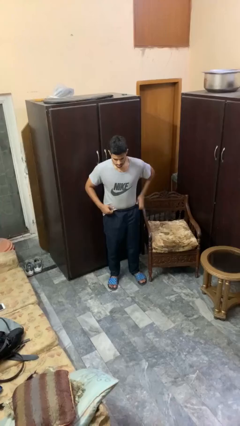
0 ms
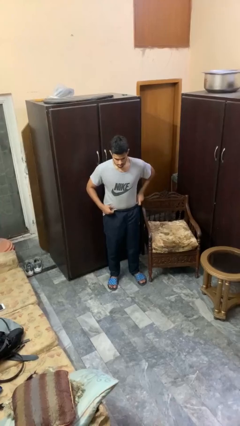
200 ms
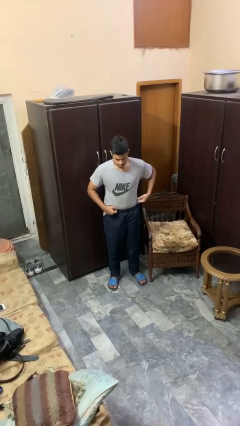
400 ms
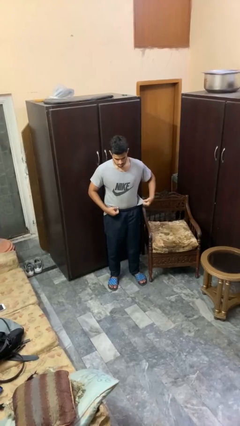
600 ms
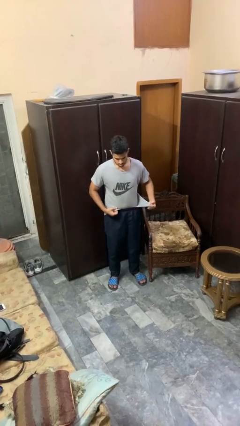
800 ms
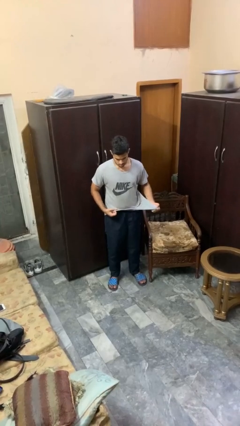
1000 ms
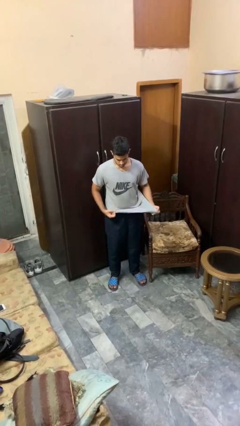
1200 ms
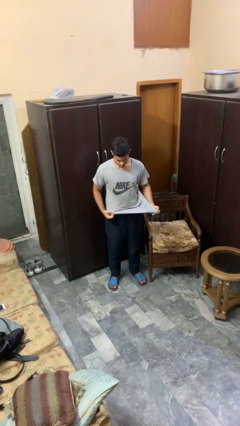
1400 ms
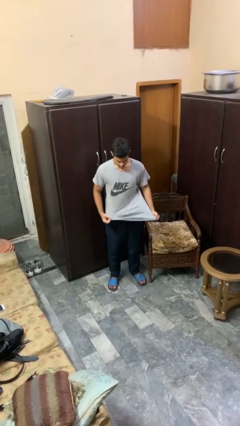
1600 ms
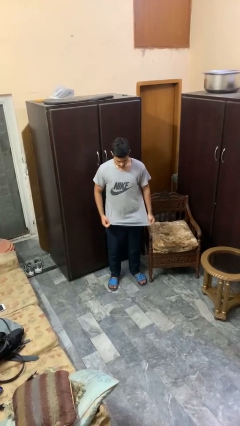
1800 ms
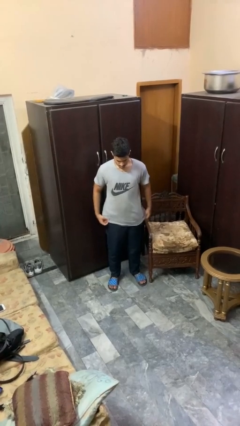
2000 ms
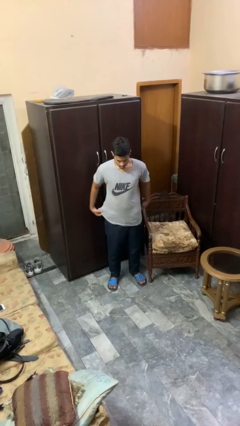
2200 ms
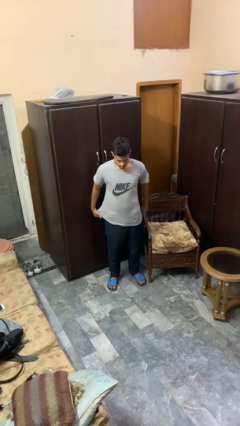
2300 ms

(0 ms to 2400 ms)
person untucks shirt

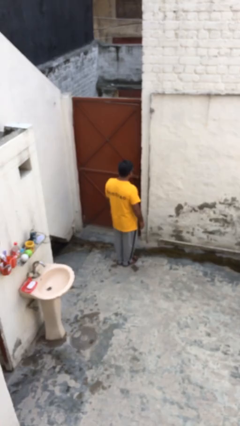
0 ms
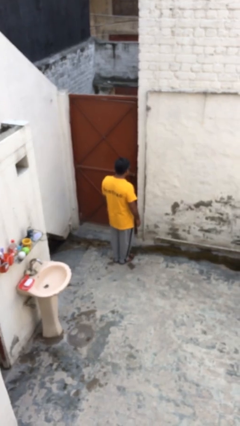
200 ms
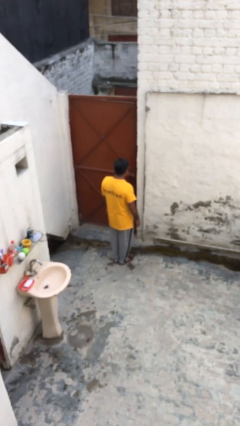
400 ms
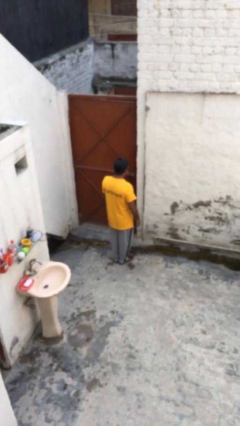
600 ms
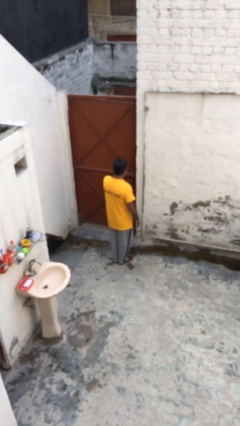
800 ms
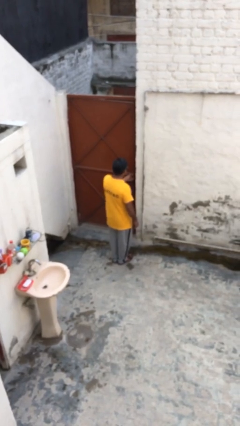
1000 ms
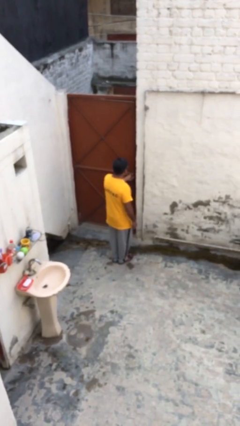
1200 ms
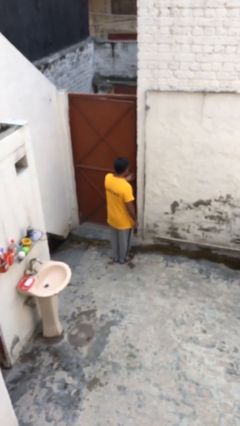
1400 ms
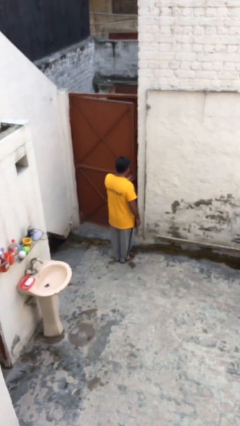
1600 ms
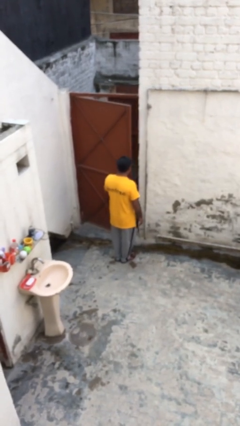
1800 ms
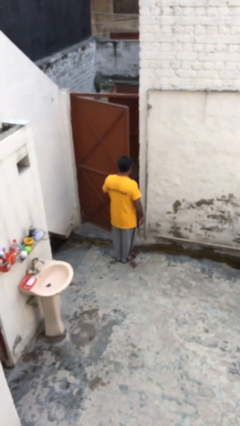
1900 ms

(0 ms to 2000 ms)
person opens facility door

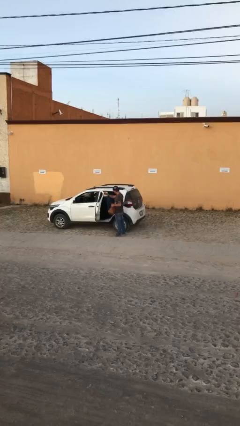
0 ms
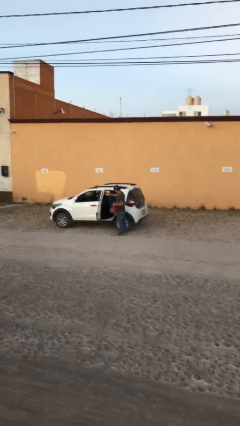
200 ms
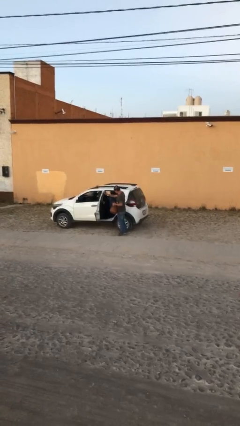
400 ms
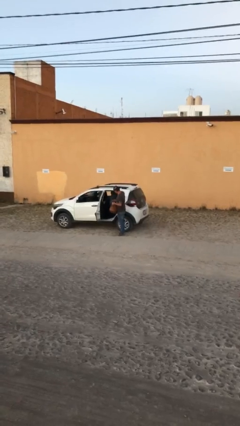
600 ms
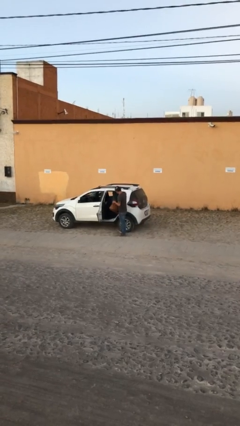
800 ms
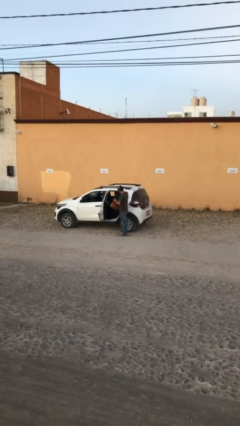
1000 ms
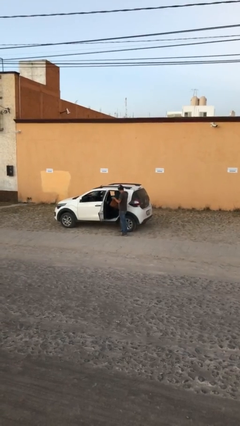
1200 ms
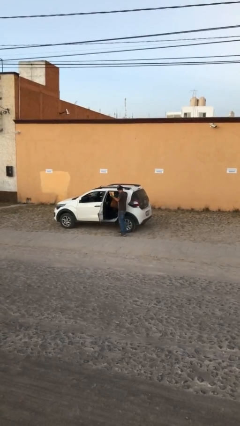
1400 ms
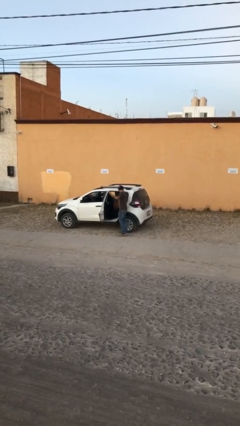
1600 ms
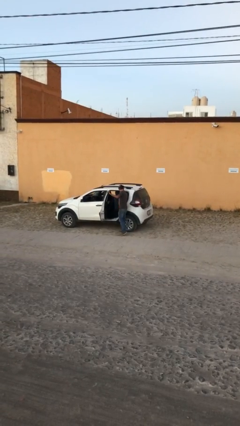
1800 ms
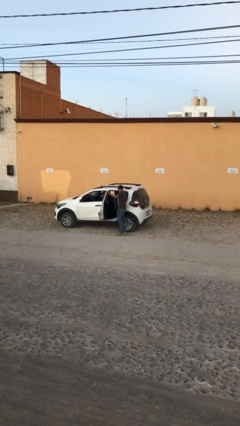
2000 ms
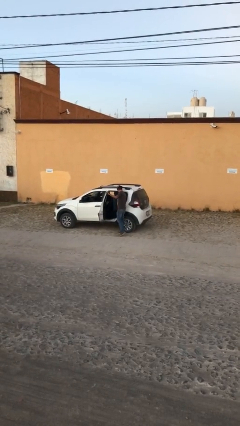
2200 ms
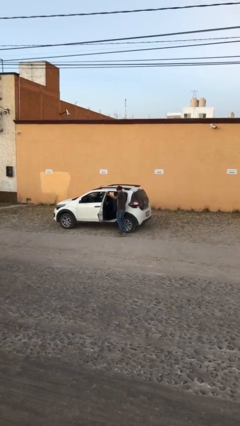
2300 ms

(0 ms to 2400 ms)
person loads car

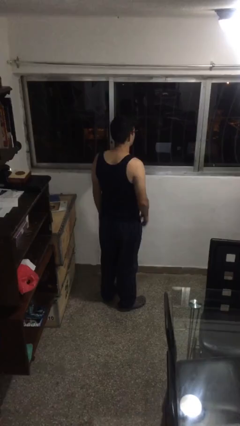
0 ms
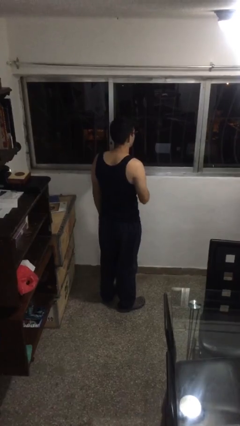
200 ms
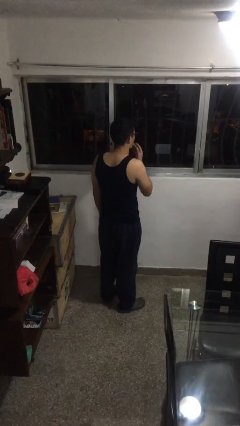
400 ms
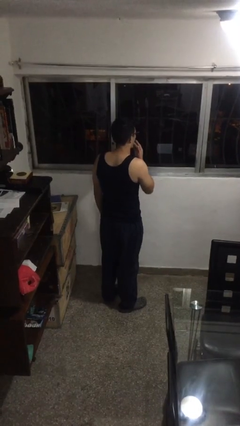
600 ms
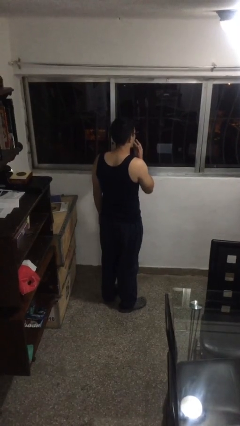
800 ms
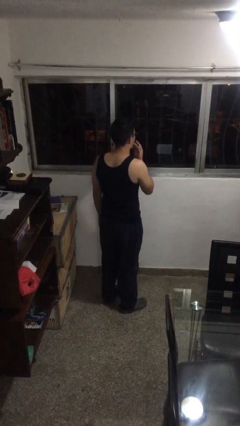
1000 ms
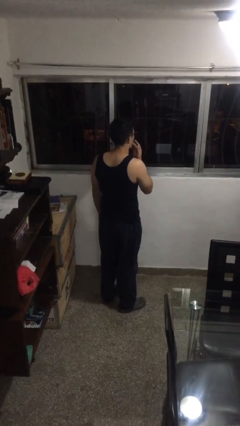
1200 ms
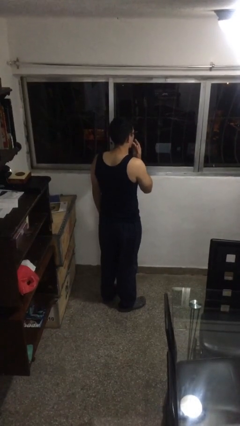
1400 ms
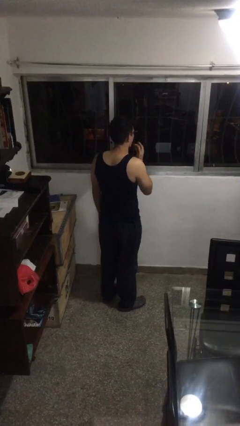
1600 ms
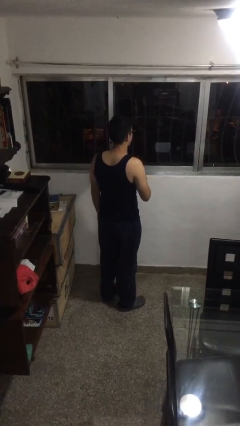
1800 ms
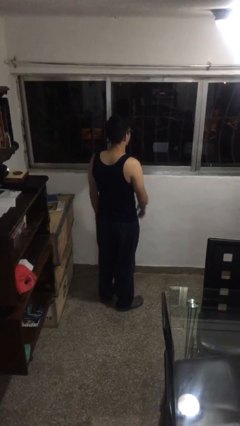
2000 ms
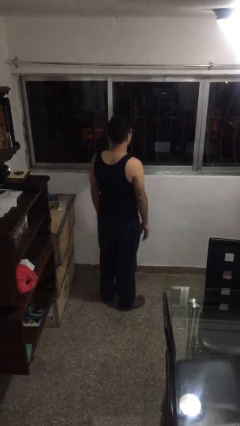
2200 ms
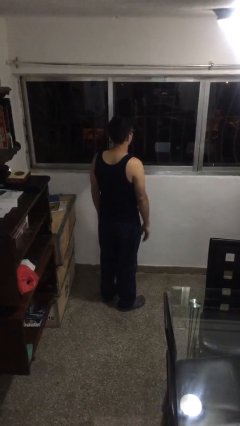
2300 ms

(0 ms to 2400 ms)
person licks fingers

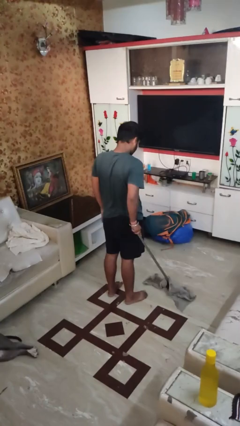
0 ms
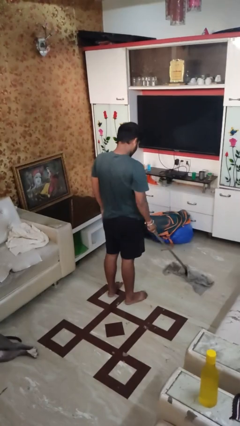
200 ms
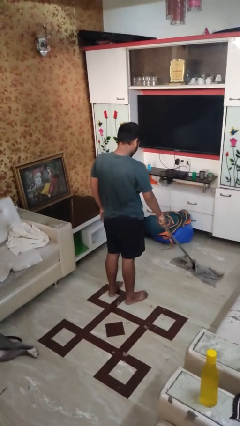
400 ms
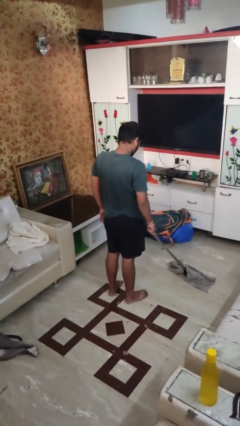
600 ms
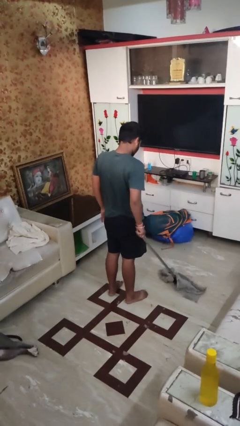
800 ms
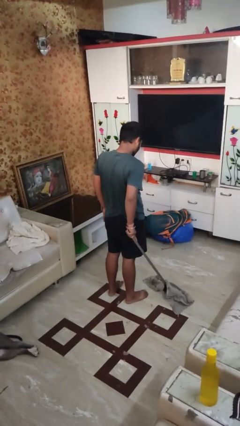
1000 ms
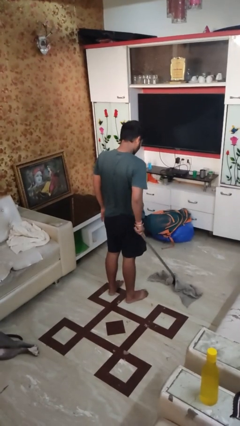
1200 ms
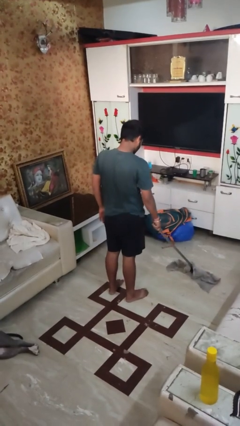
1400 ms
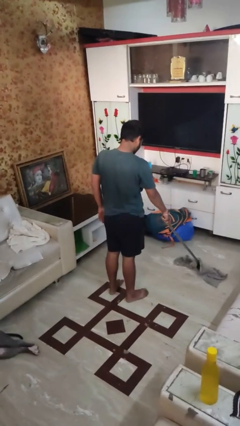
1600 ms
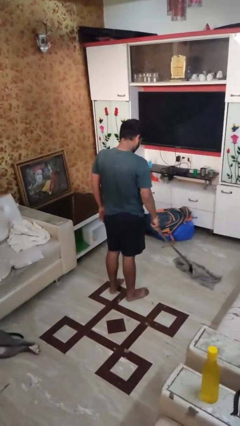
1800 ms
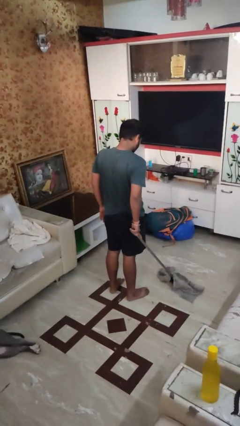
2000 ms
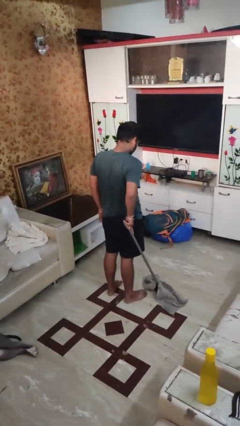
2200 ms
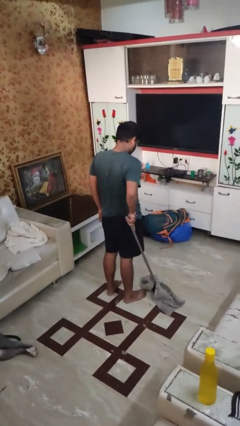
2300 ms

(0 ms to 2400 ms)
person mops

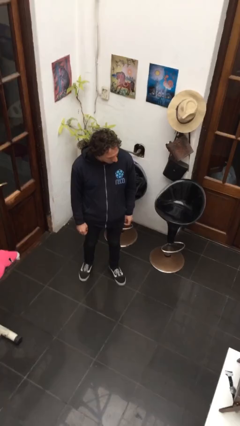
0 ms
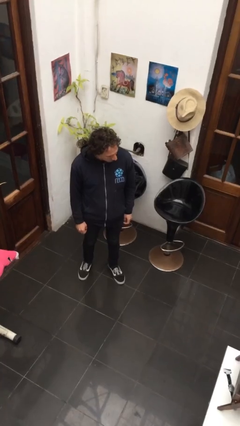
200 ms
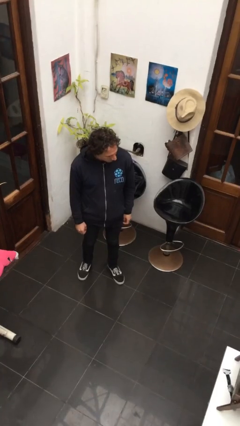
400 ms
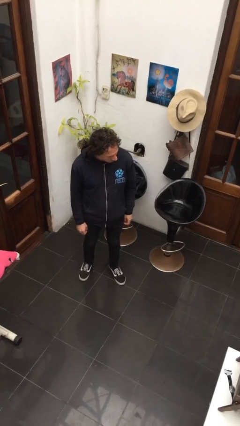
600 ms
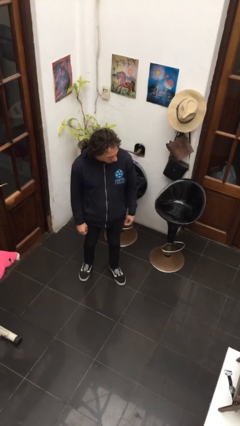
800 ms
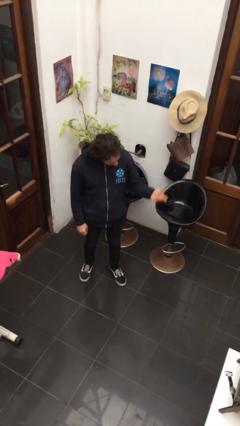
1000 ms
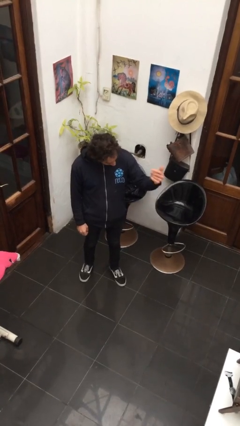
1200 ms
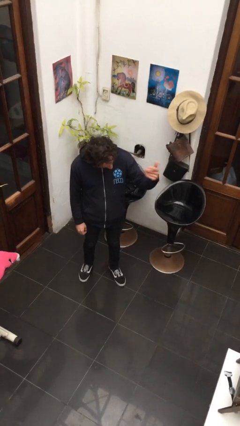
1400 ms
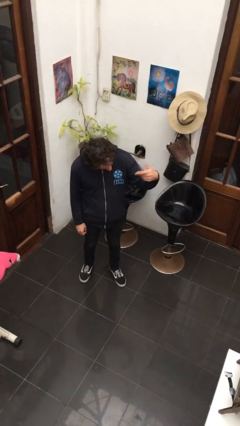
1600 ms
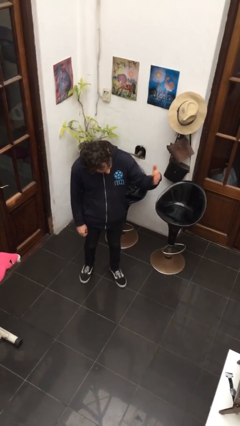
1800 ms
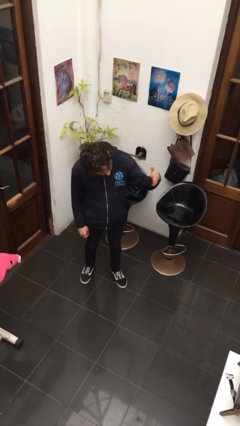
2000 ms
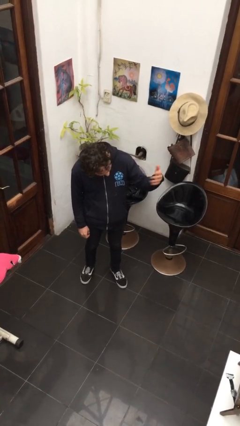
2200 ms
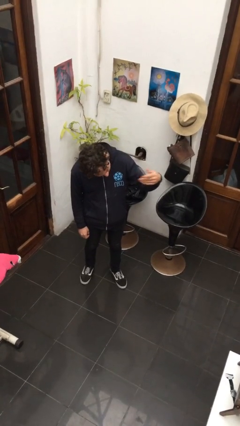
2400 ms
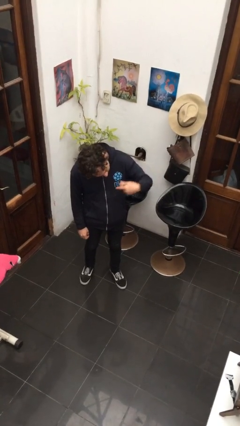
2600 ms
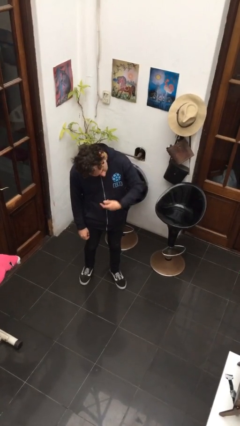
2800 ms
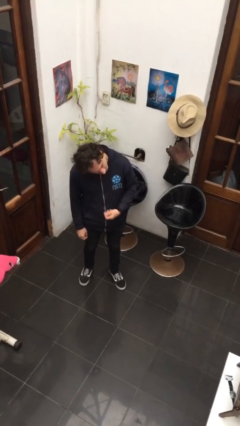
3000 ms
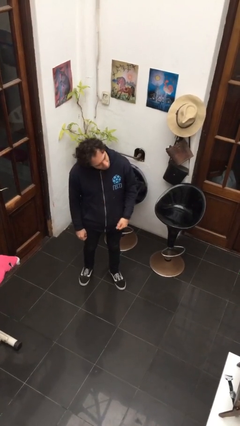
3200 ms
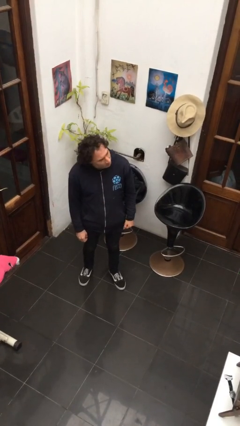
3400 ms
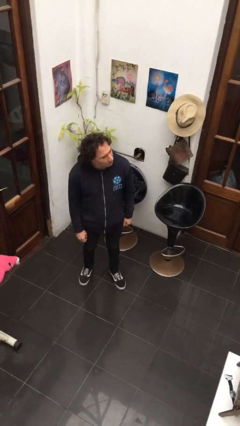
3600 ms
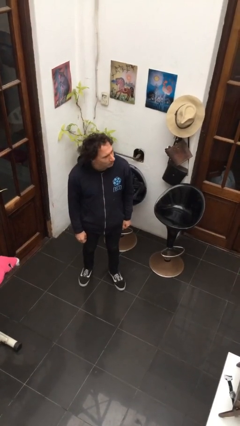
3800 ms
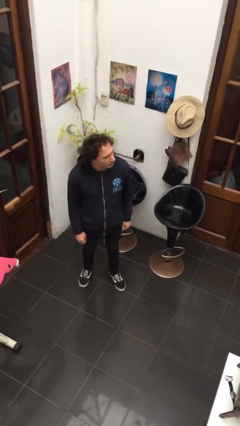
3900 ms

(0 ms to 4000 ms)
person gestures come here

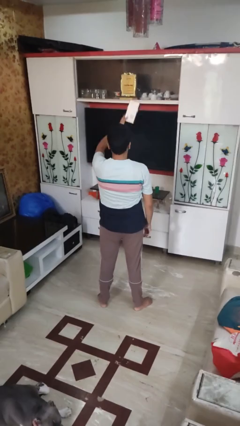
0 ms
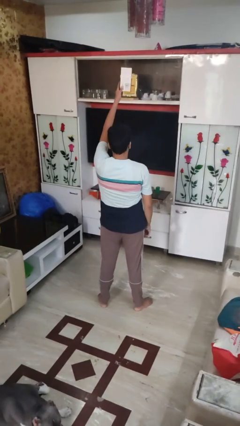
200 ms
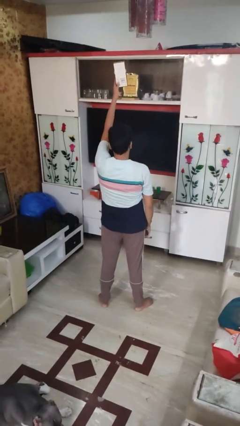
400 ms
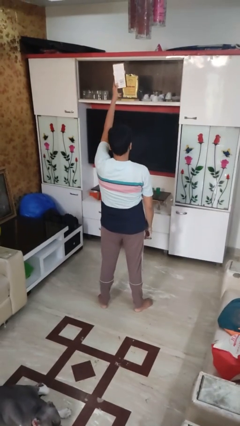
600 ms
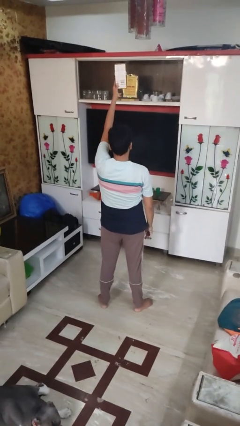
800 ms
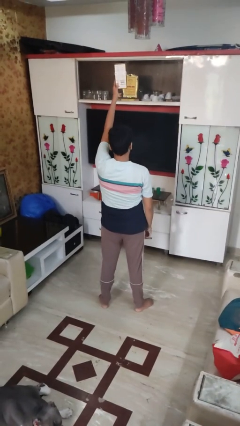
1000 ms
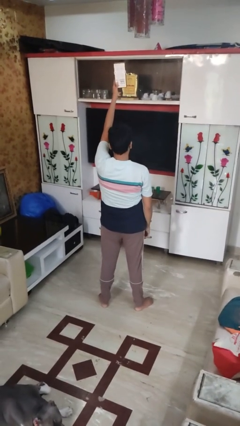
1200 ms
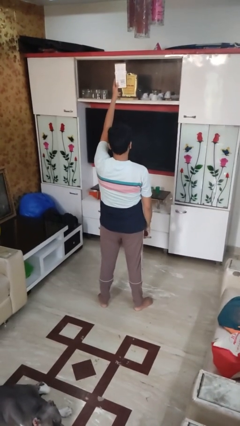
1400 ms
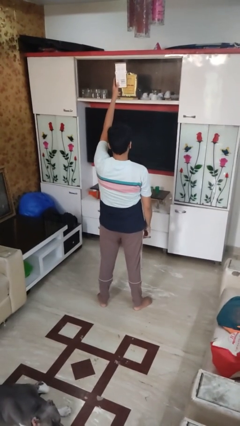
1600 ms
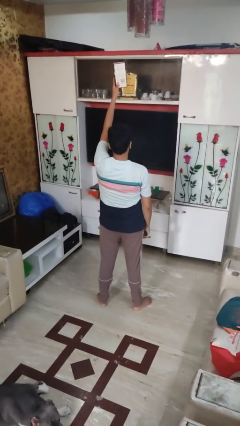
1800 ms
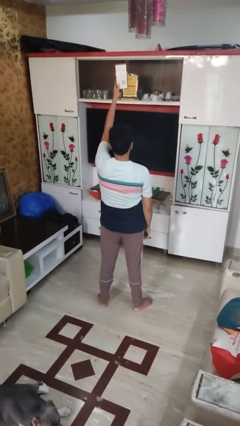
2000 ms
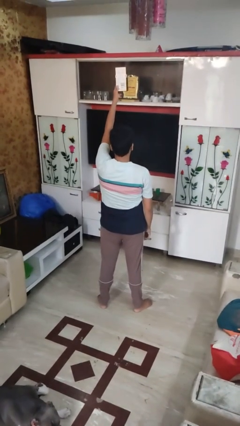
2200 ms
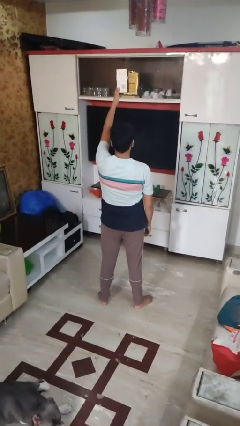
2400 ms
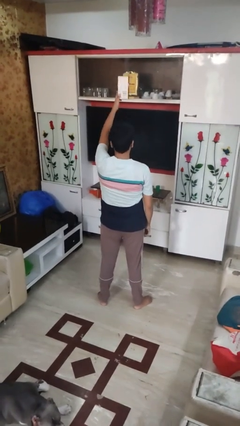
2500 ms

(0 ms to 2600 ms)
person holds object above head
